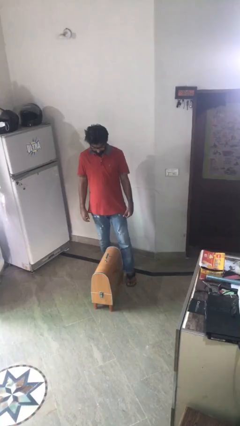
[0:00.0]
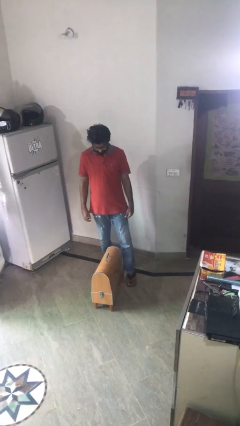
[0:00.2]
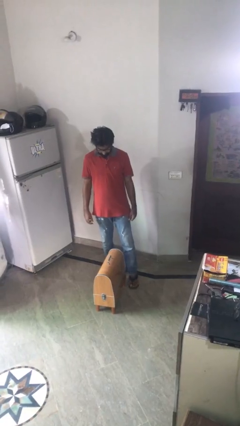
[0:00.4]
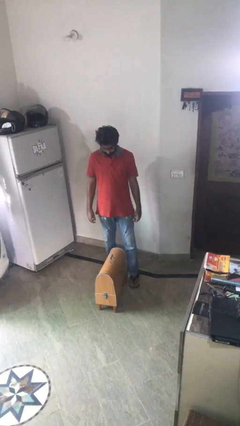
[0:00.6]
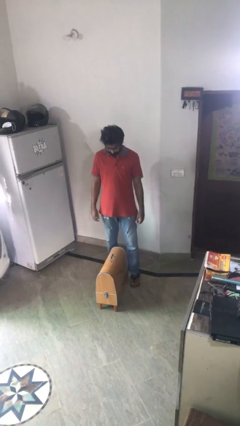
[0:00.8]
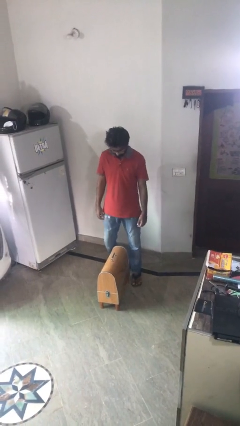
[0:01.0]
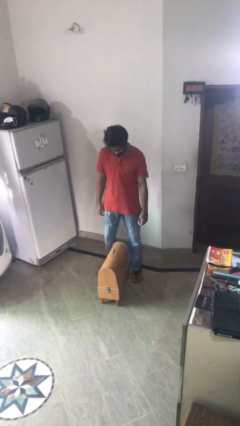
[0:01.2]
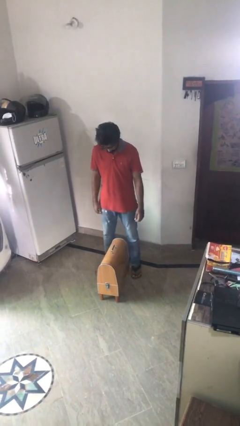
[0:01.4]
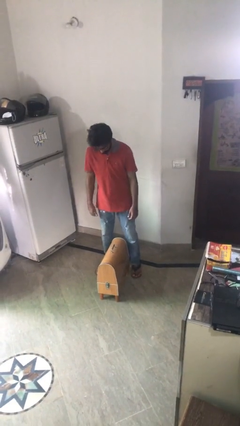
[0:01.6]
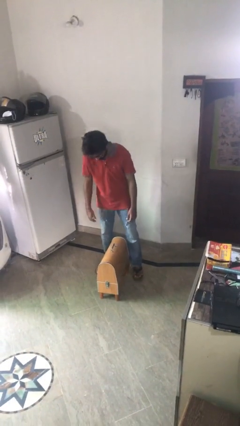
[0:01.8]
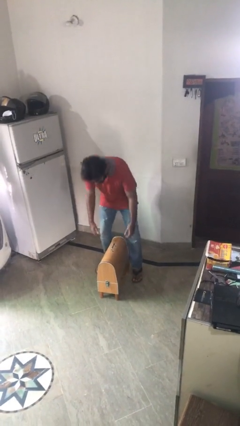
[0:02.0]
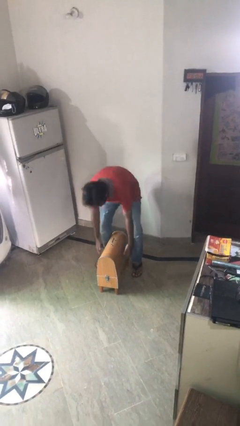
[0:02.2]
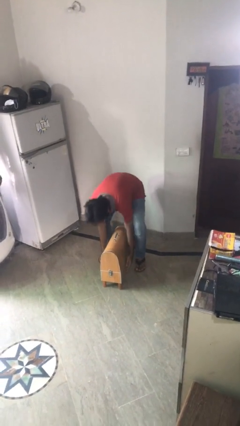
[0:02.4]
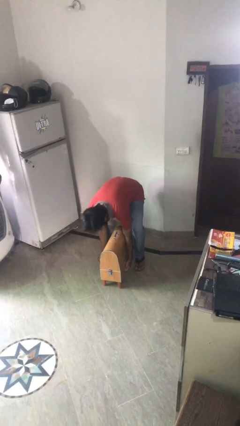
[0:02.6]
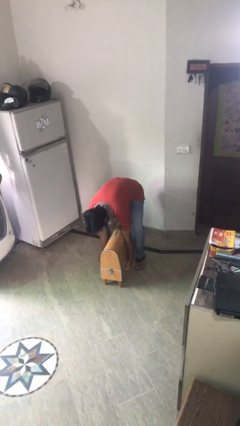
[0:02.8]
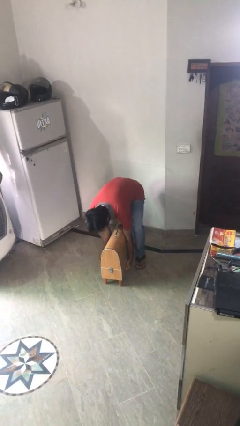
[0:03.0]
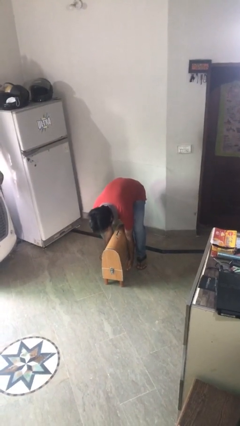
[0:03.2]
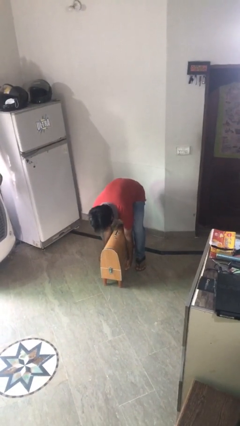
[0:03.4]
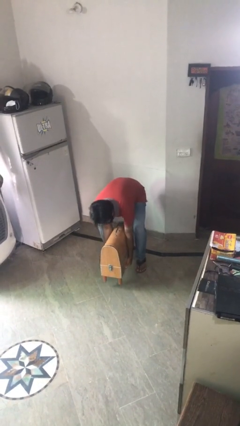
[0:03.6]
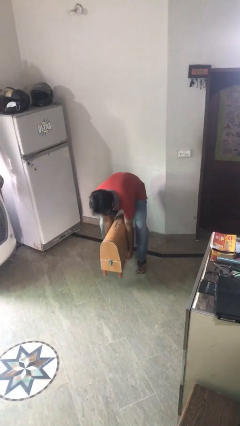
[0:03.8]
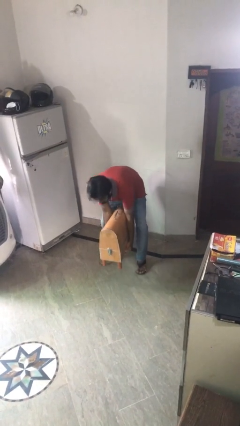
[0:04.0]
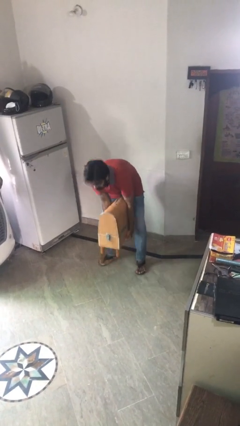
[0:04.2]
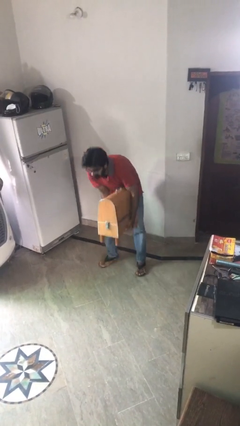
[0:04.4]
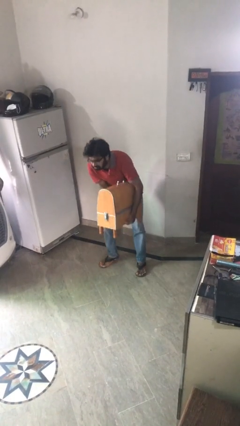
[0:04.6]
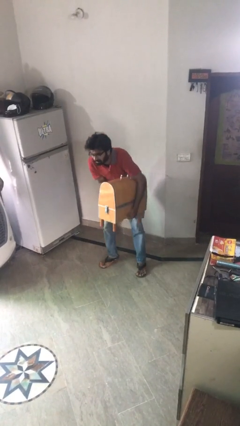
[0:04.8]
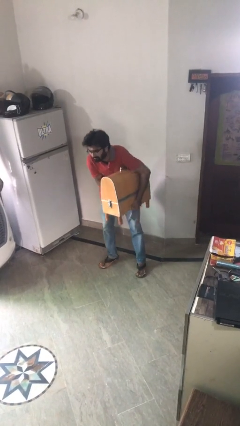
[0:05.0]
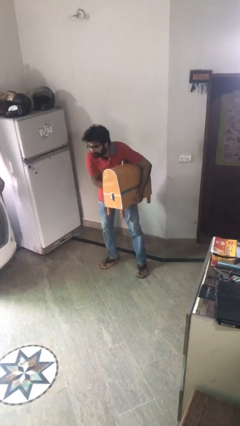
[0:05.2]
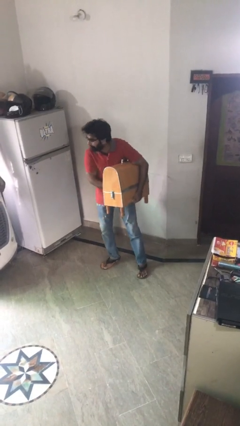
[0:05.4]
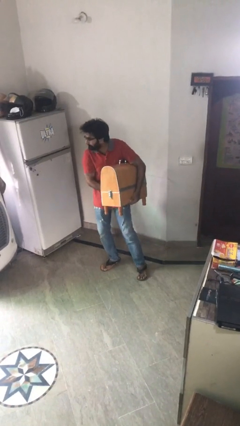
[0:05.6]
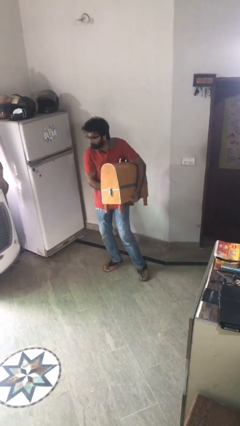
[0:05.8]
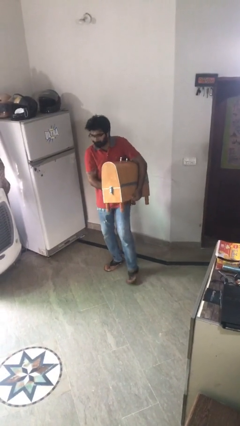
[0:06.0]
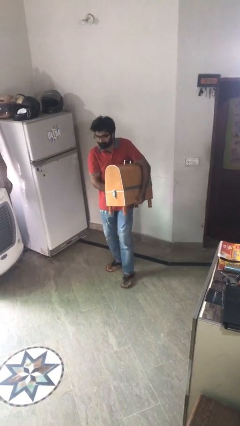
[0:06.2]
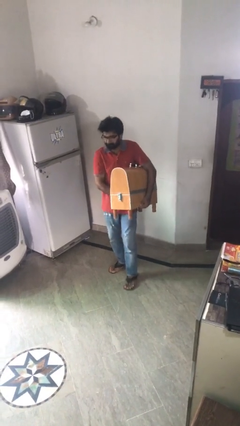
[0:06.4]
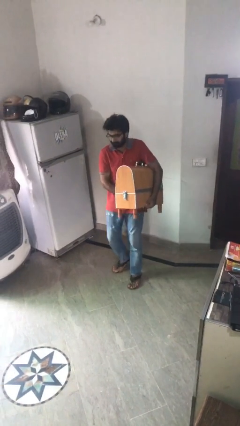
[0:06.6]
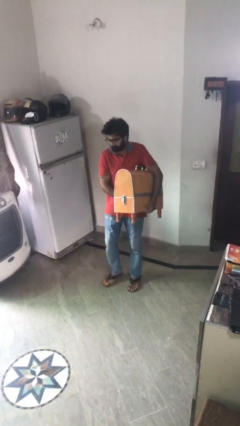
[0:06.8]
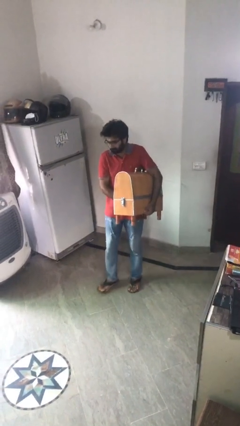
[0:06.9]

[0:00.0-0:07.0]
person picks up object from floor

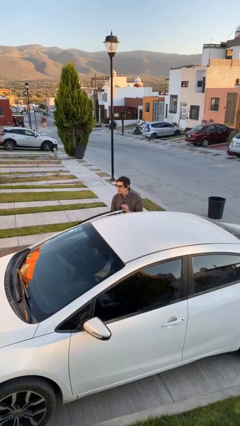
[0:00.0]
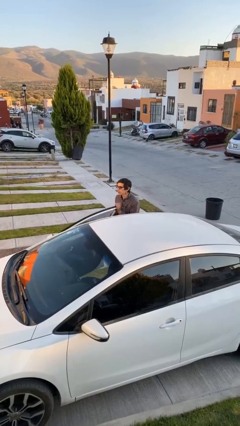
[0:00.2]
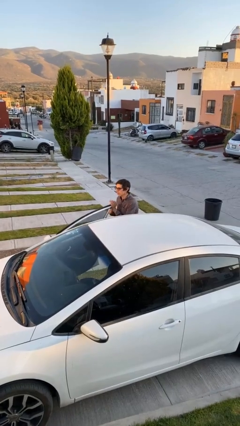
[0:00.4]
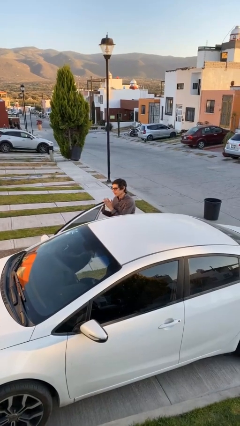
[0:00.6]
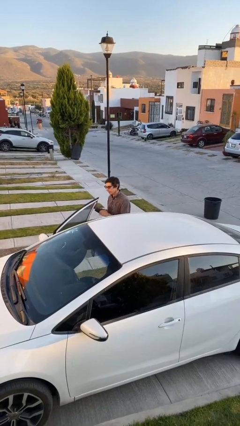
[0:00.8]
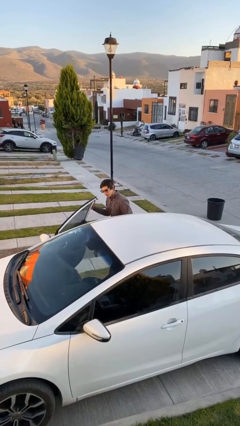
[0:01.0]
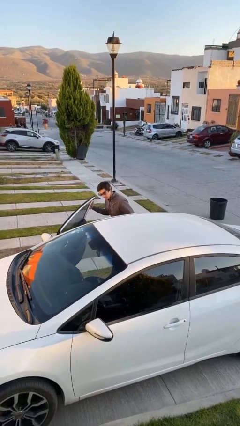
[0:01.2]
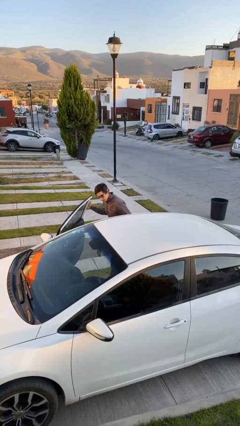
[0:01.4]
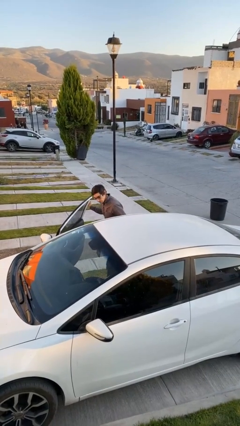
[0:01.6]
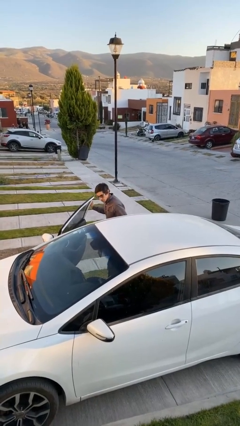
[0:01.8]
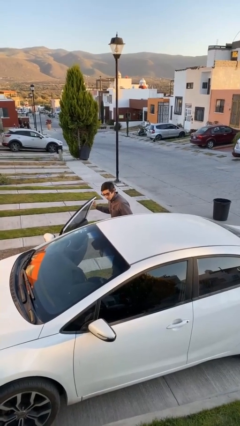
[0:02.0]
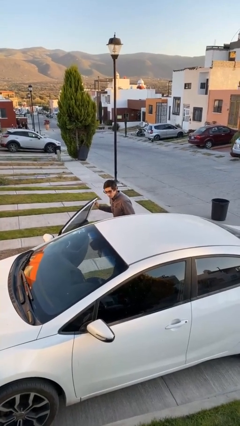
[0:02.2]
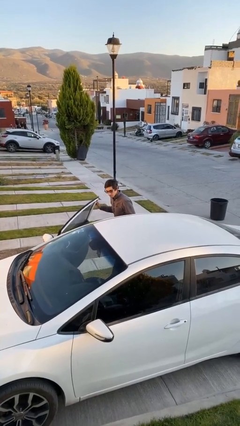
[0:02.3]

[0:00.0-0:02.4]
person opens car door

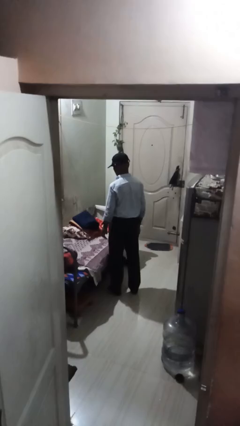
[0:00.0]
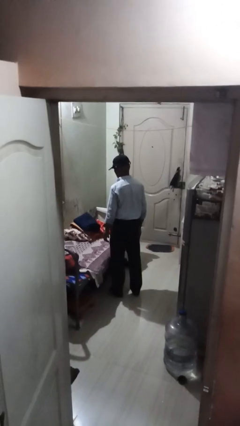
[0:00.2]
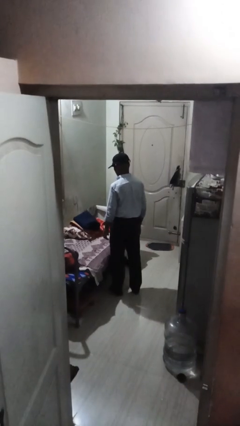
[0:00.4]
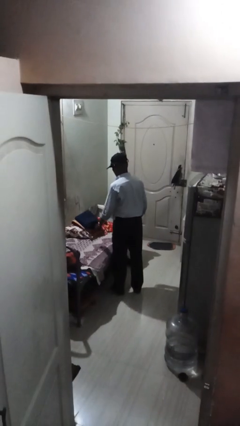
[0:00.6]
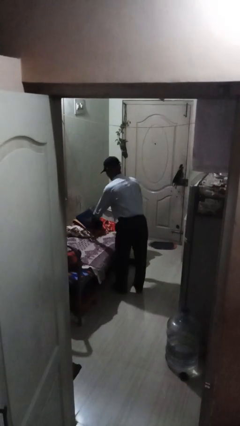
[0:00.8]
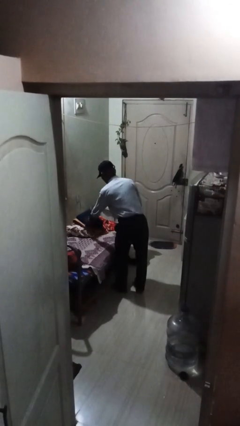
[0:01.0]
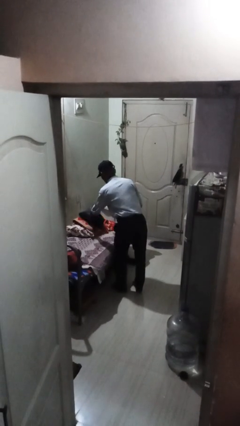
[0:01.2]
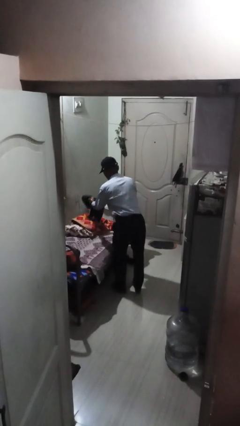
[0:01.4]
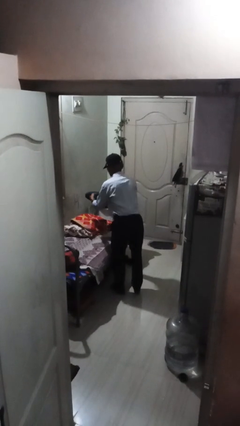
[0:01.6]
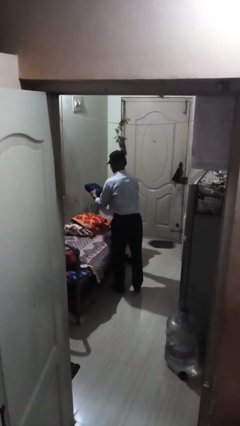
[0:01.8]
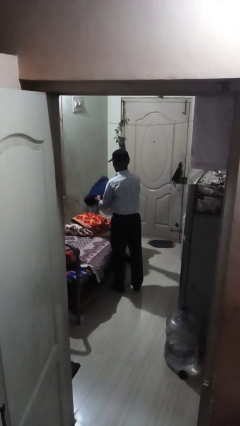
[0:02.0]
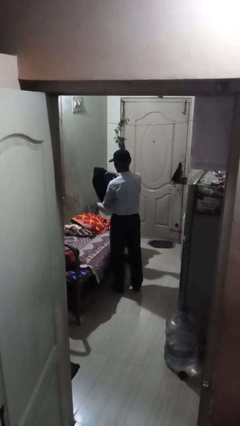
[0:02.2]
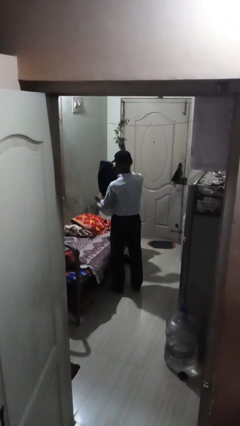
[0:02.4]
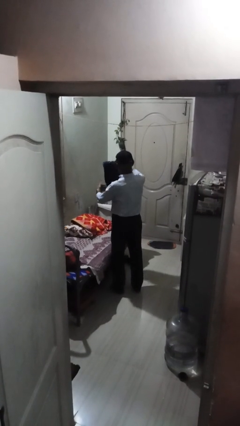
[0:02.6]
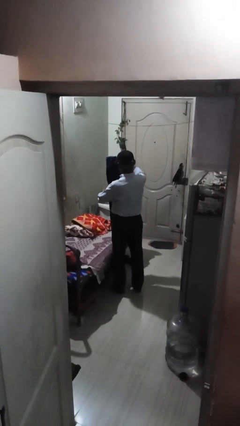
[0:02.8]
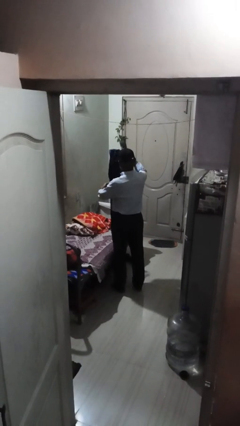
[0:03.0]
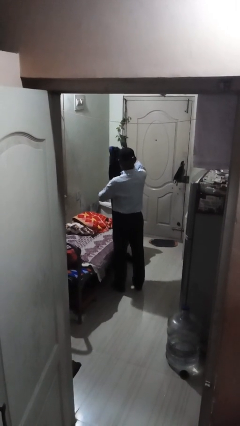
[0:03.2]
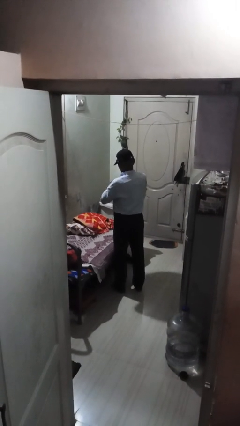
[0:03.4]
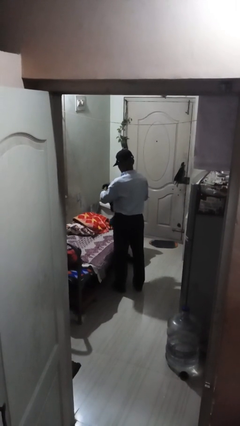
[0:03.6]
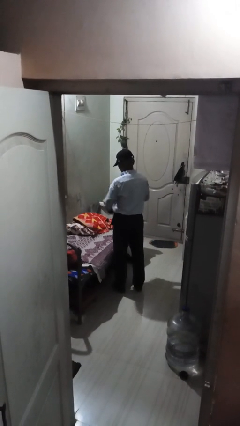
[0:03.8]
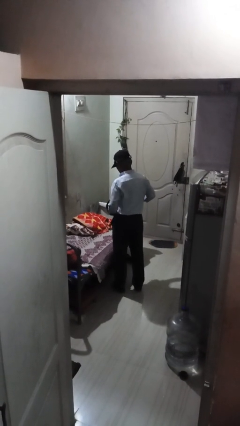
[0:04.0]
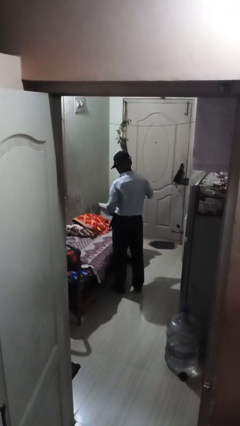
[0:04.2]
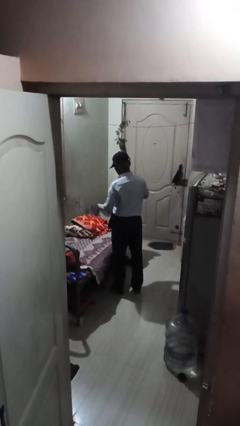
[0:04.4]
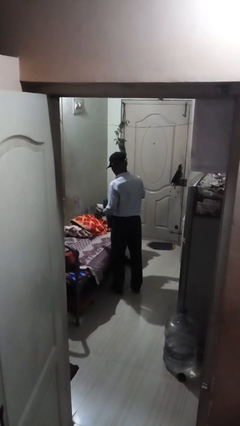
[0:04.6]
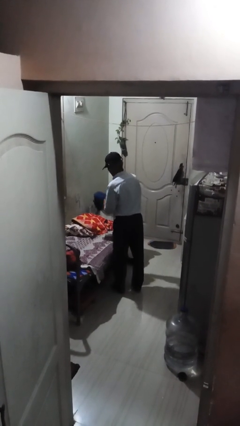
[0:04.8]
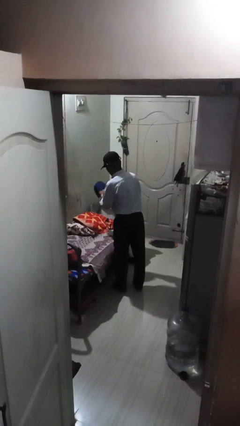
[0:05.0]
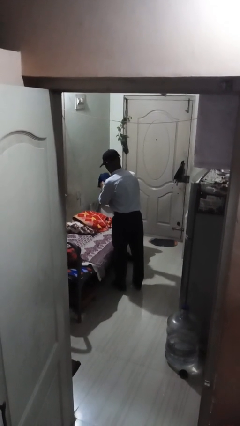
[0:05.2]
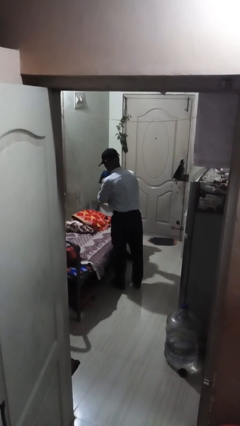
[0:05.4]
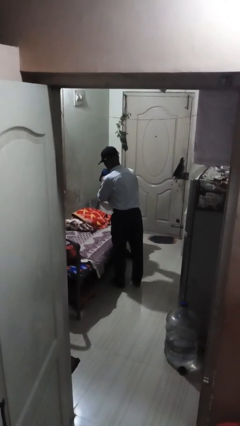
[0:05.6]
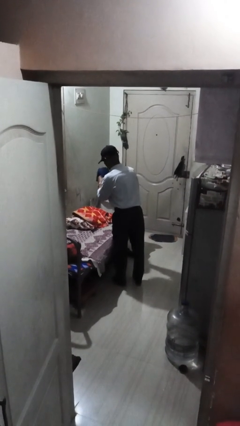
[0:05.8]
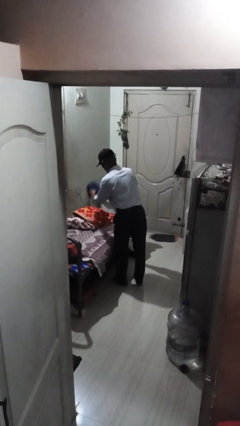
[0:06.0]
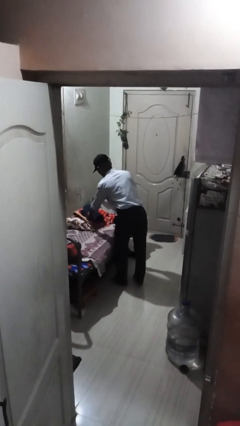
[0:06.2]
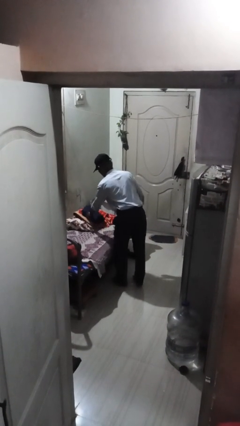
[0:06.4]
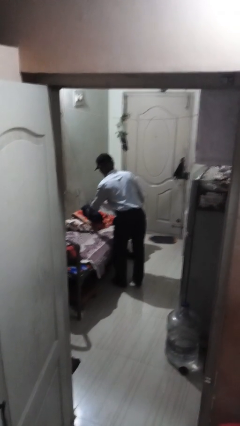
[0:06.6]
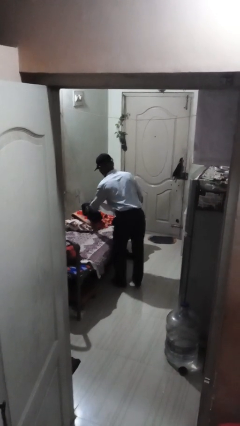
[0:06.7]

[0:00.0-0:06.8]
person folds pants

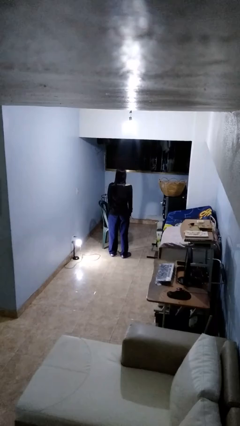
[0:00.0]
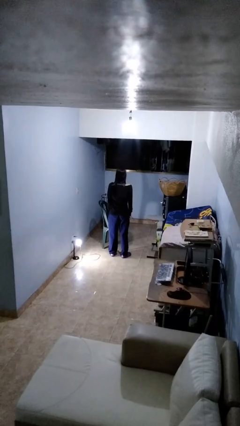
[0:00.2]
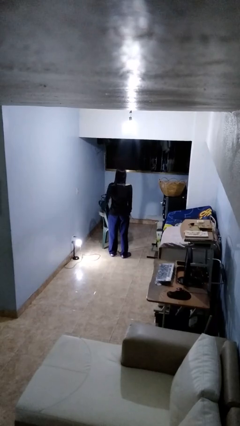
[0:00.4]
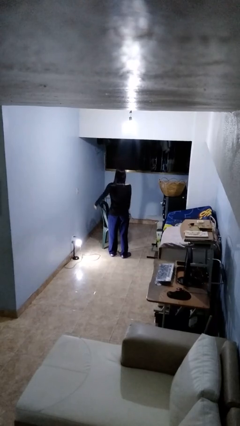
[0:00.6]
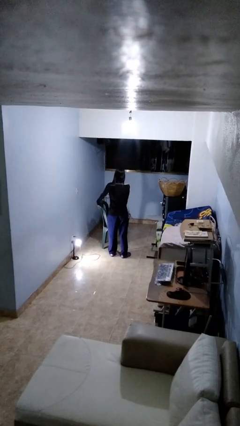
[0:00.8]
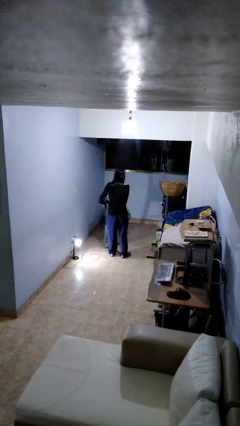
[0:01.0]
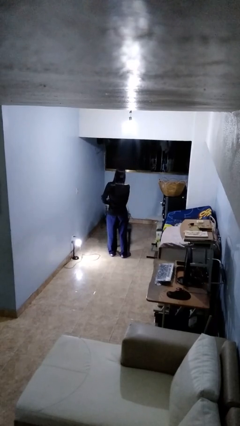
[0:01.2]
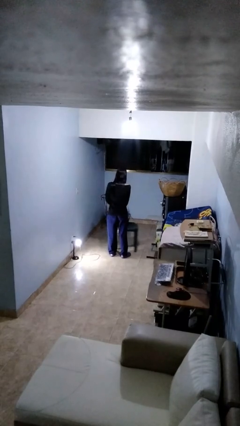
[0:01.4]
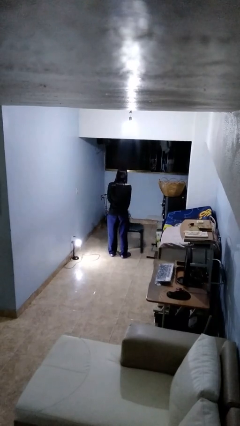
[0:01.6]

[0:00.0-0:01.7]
person pushes in chair
